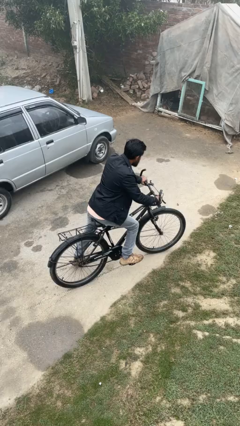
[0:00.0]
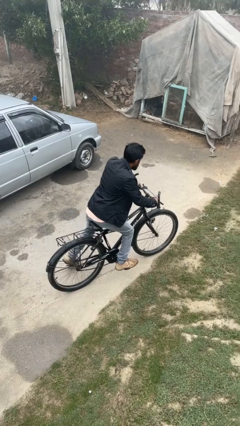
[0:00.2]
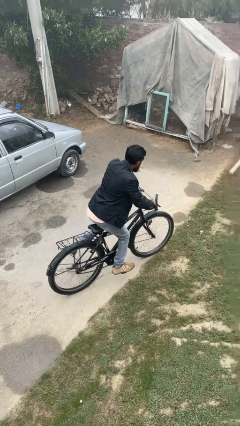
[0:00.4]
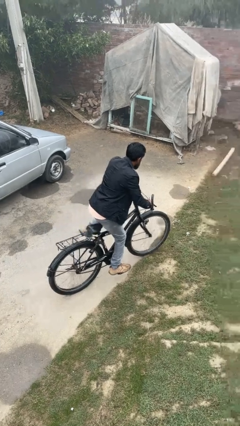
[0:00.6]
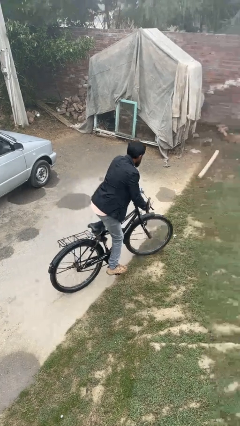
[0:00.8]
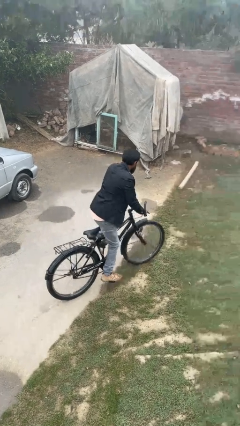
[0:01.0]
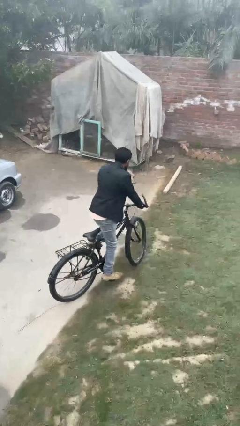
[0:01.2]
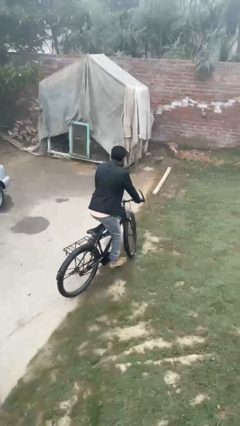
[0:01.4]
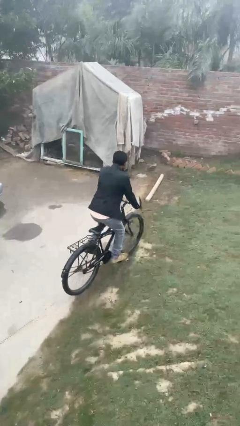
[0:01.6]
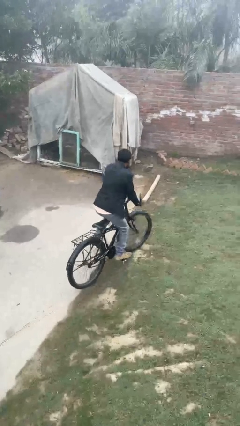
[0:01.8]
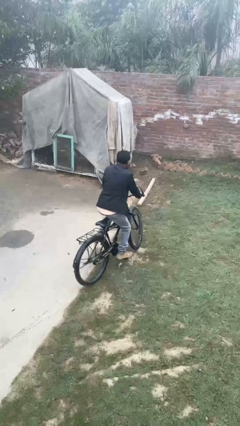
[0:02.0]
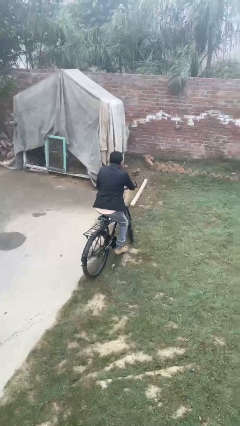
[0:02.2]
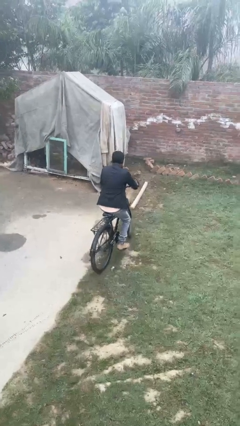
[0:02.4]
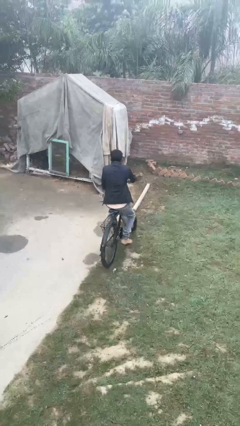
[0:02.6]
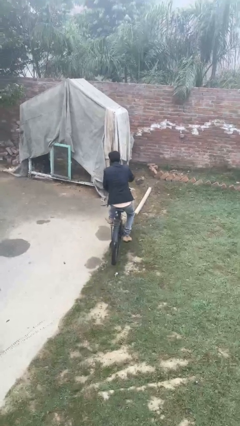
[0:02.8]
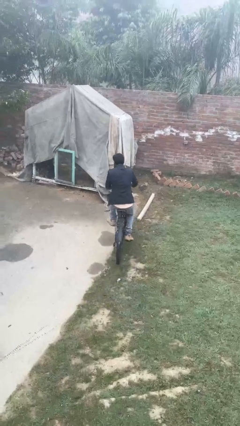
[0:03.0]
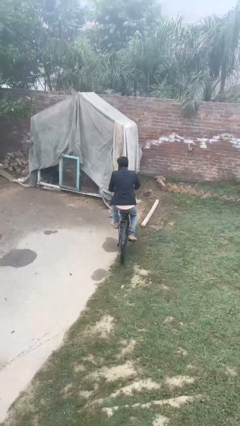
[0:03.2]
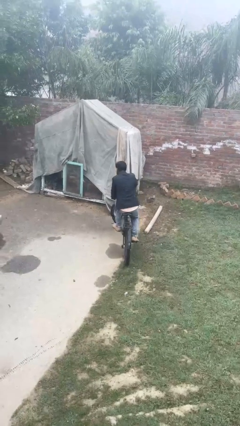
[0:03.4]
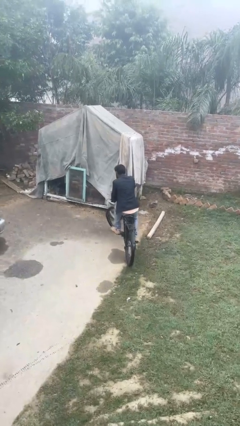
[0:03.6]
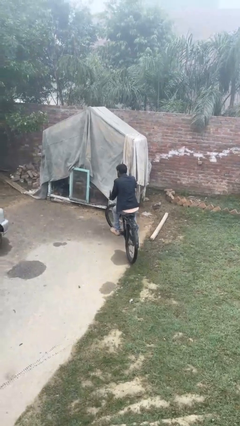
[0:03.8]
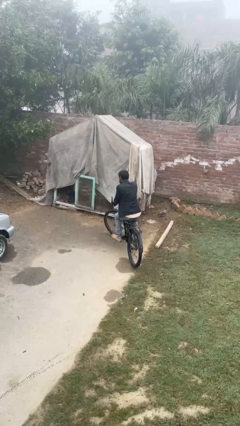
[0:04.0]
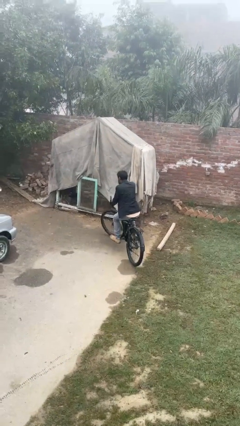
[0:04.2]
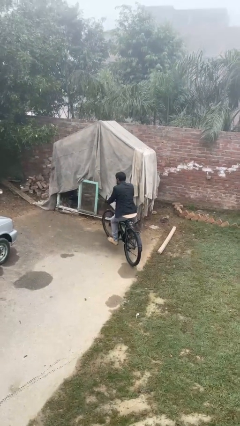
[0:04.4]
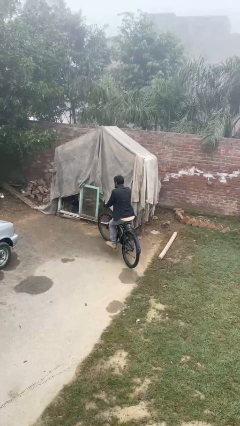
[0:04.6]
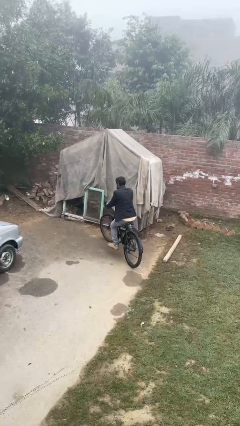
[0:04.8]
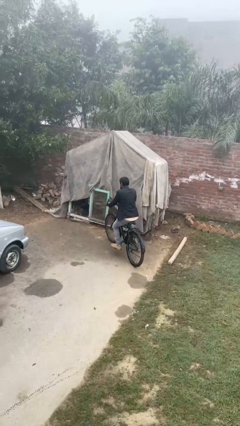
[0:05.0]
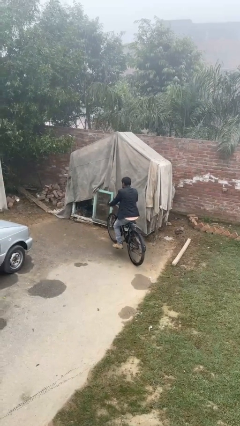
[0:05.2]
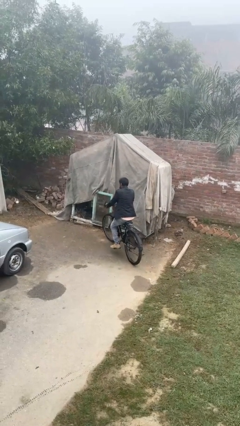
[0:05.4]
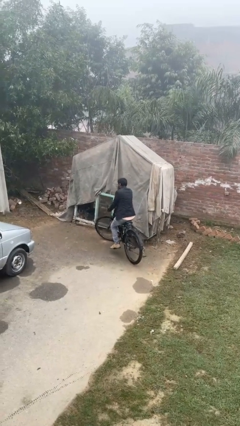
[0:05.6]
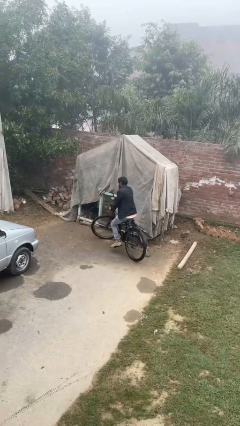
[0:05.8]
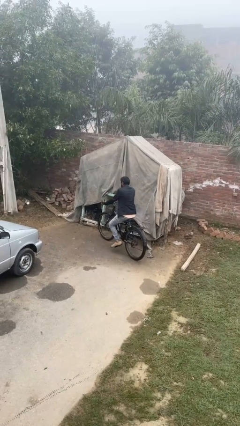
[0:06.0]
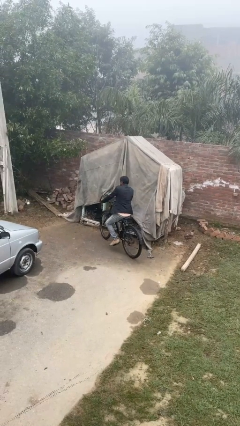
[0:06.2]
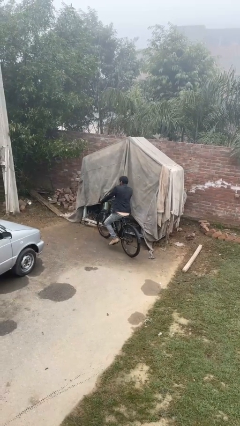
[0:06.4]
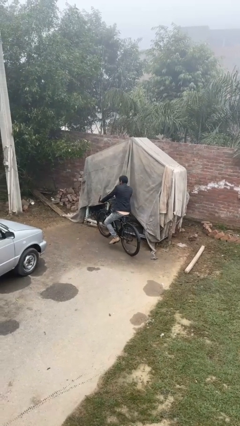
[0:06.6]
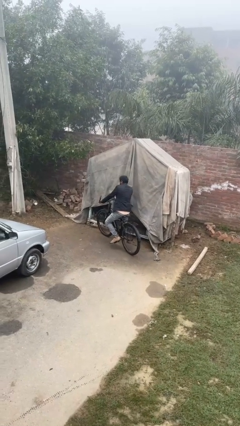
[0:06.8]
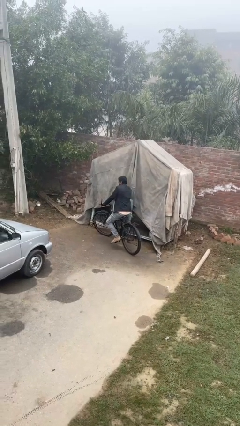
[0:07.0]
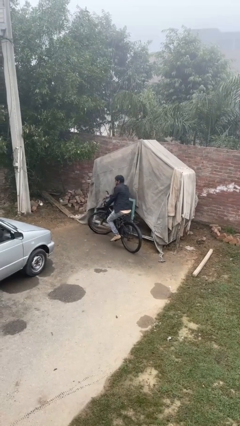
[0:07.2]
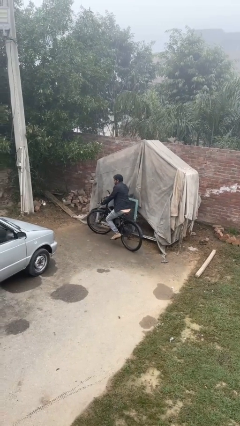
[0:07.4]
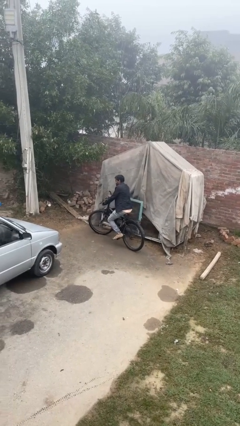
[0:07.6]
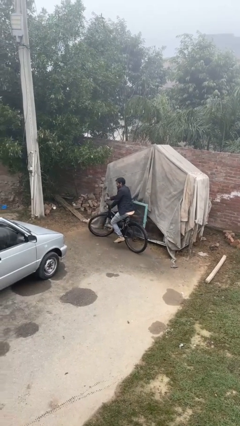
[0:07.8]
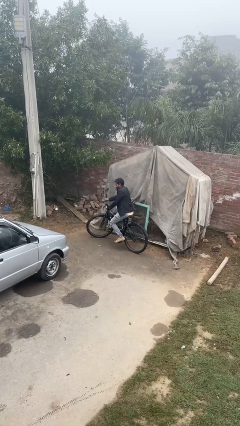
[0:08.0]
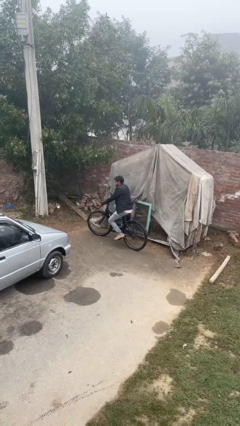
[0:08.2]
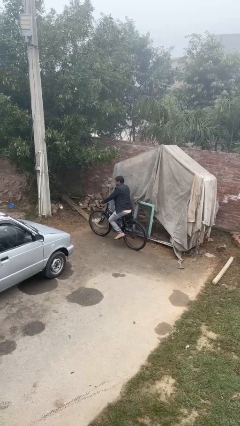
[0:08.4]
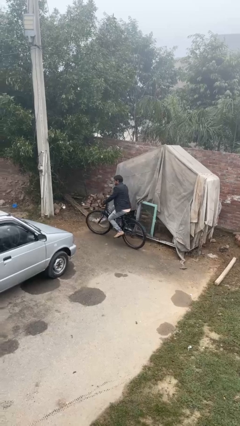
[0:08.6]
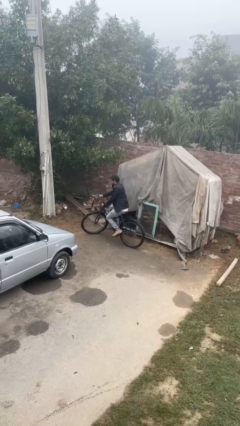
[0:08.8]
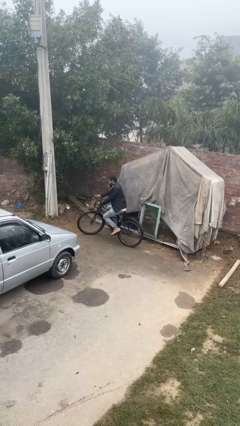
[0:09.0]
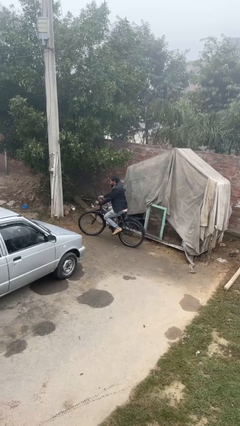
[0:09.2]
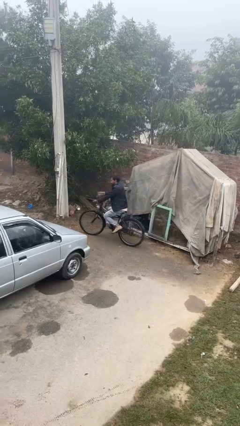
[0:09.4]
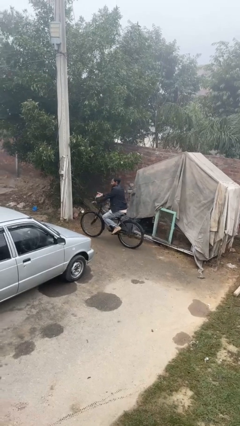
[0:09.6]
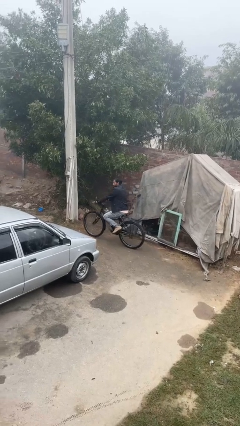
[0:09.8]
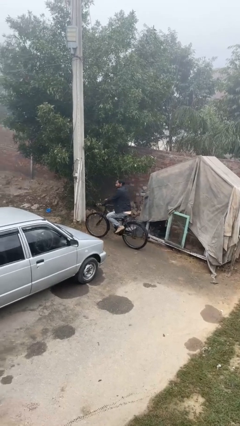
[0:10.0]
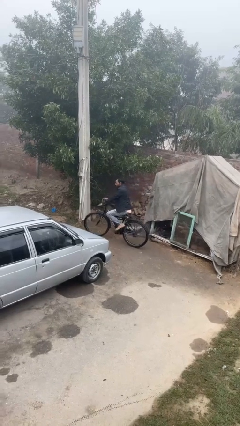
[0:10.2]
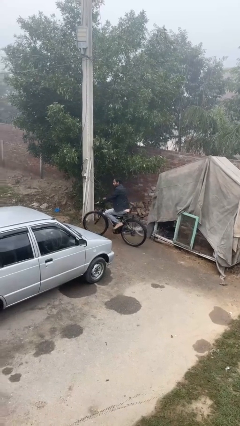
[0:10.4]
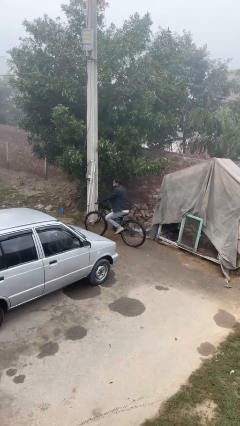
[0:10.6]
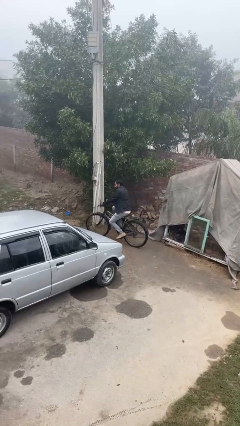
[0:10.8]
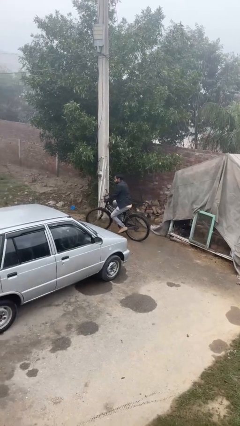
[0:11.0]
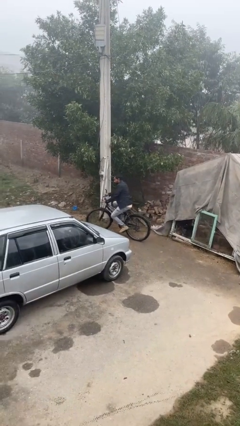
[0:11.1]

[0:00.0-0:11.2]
person rides bicycle

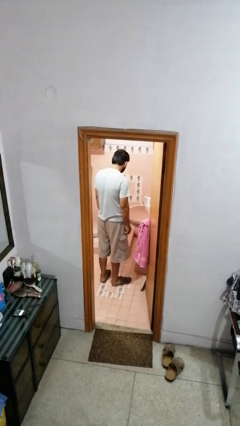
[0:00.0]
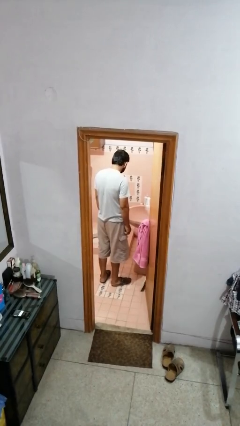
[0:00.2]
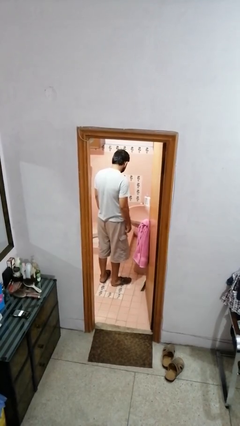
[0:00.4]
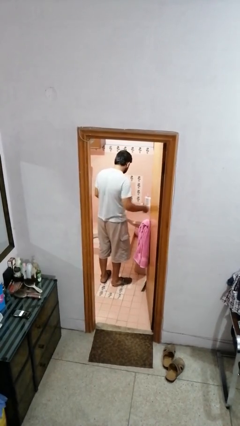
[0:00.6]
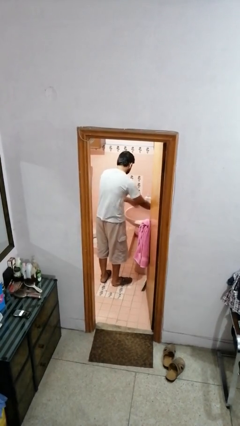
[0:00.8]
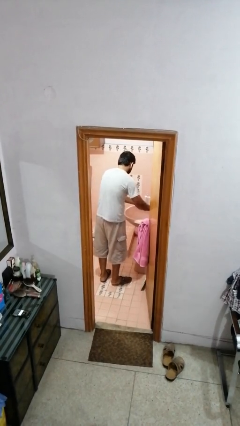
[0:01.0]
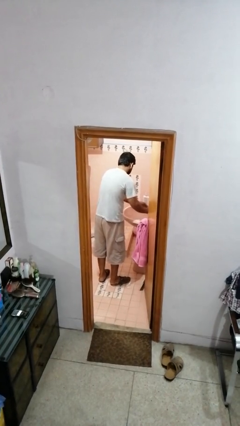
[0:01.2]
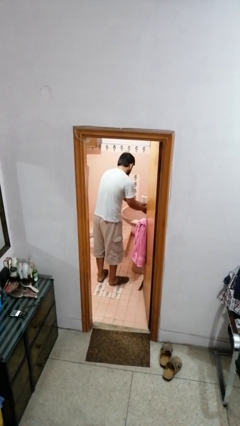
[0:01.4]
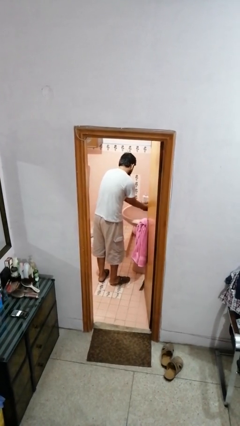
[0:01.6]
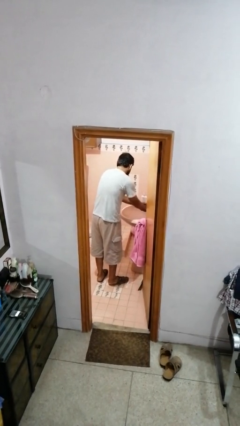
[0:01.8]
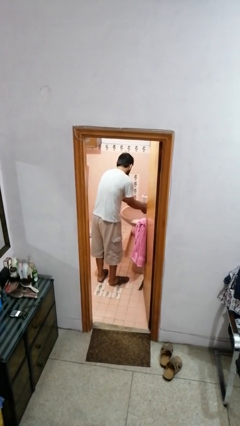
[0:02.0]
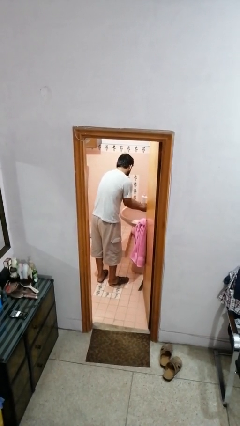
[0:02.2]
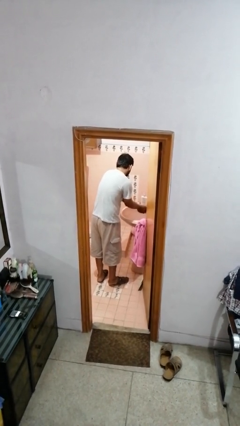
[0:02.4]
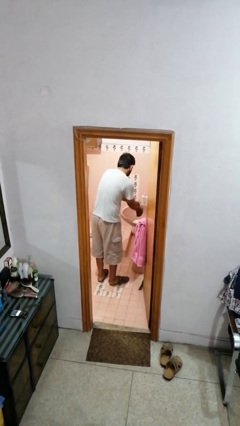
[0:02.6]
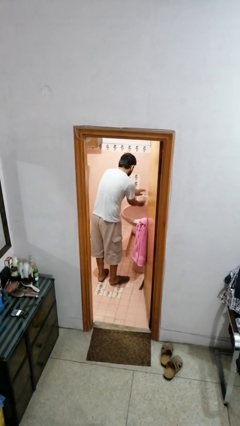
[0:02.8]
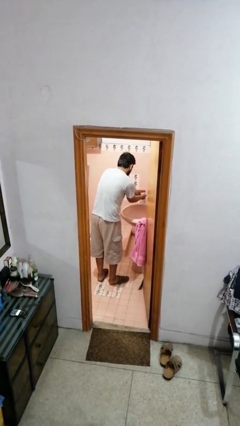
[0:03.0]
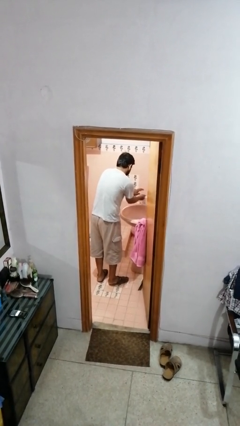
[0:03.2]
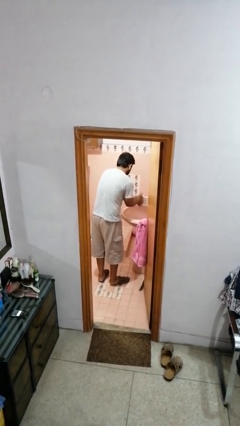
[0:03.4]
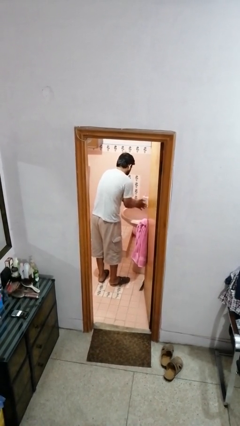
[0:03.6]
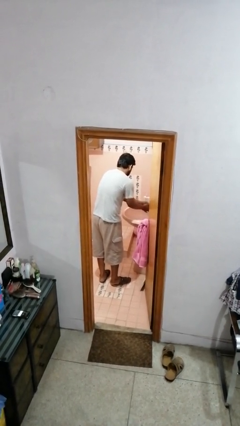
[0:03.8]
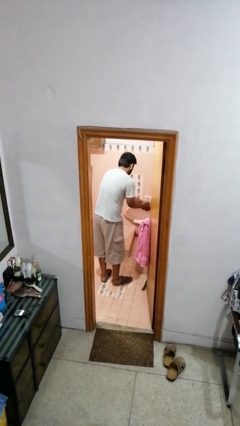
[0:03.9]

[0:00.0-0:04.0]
person washes hands

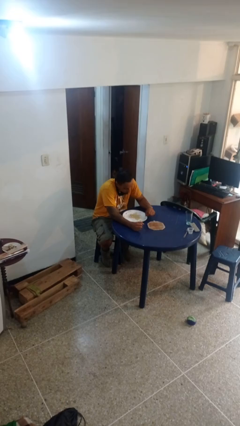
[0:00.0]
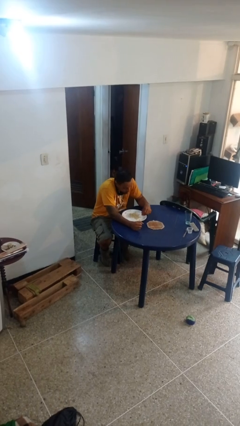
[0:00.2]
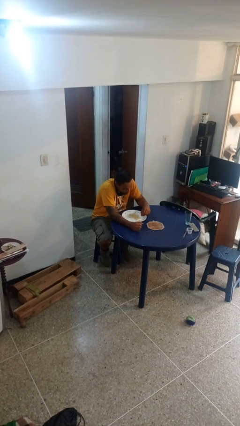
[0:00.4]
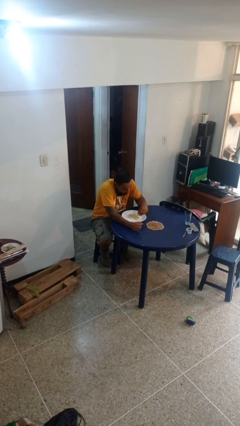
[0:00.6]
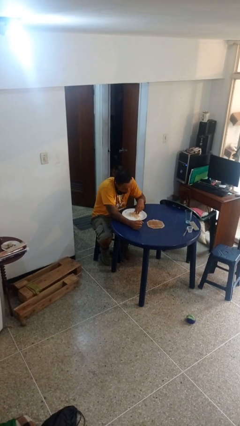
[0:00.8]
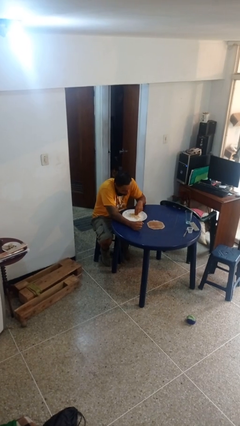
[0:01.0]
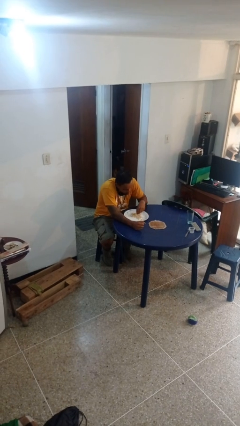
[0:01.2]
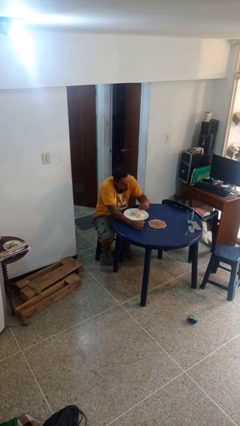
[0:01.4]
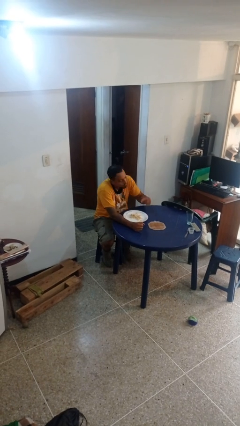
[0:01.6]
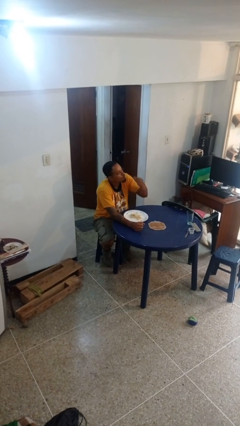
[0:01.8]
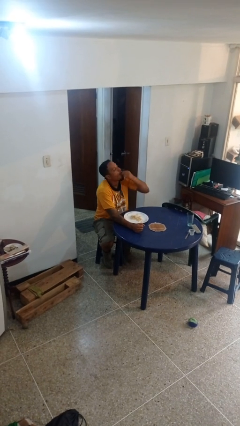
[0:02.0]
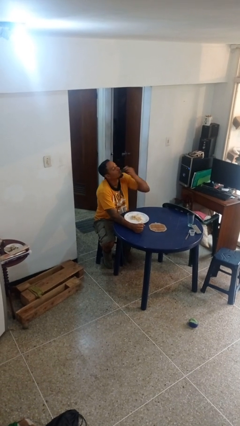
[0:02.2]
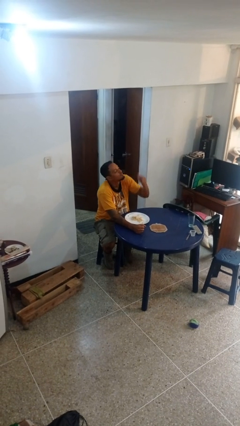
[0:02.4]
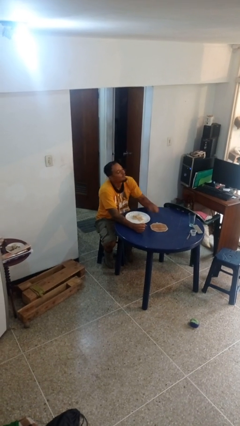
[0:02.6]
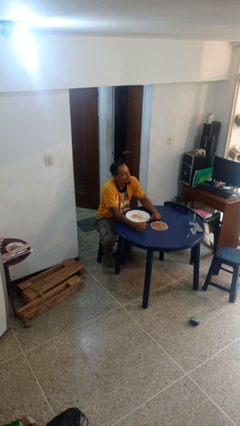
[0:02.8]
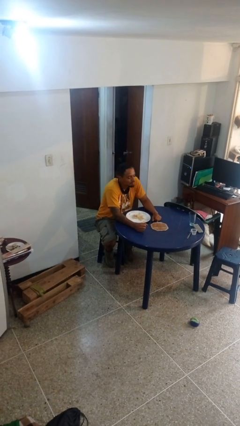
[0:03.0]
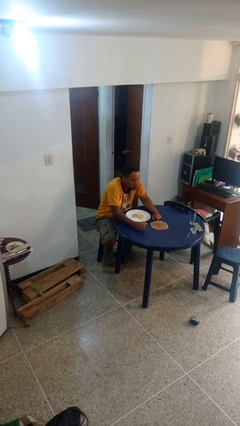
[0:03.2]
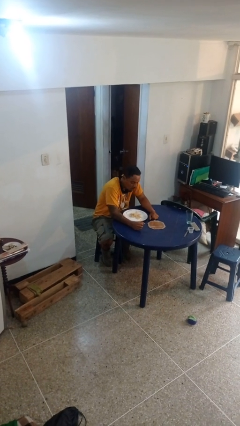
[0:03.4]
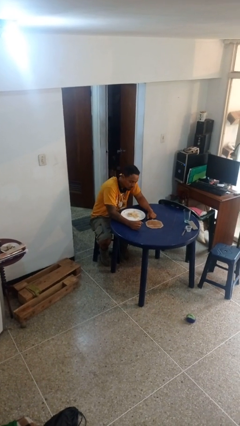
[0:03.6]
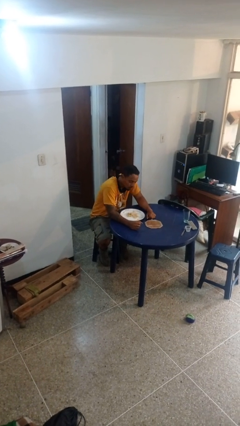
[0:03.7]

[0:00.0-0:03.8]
person eats with hands
